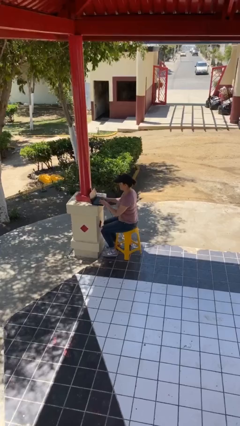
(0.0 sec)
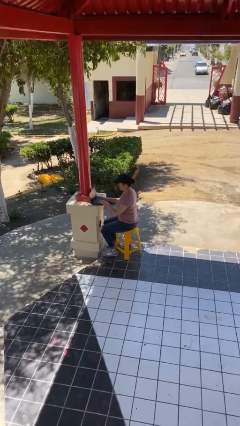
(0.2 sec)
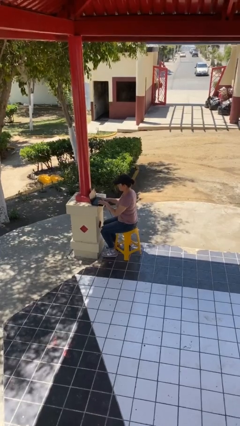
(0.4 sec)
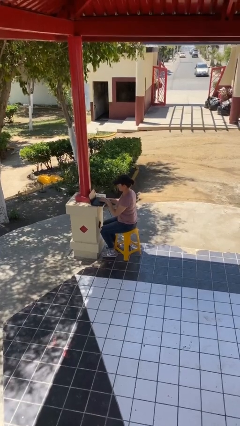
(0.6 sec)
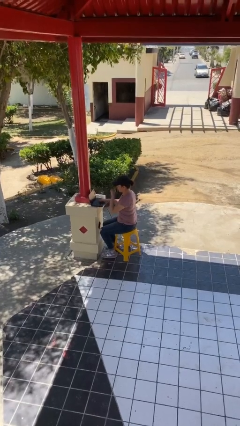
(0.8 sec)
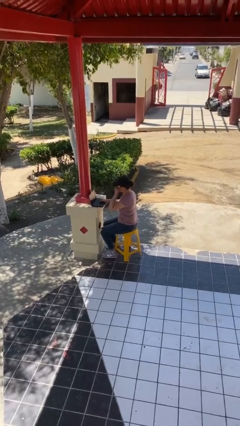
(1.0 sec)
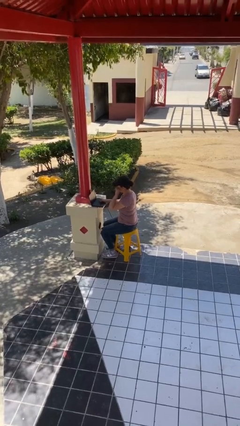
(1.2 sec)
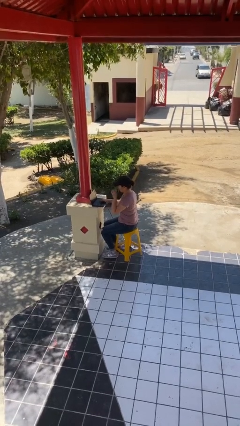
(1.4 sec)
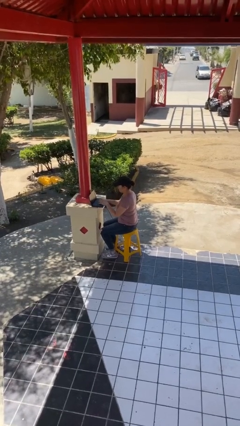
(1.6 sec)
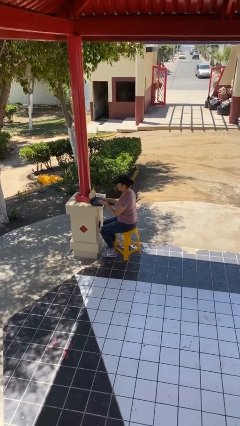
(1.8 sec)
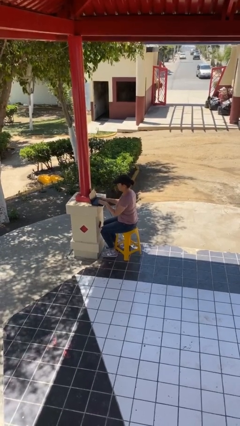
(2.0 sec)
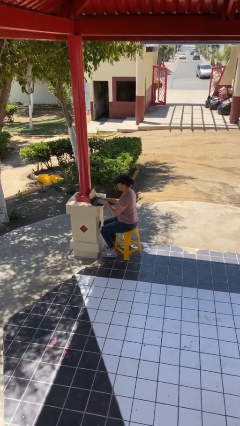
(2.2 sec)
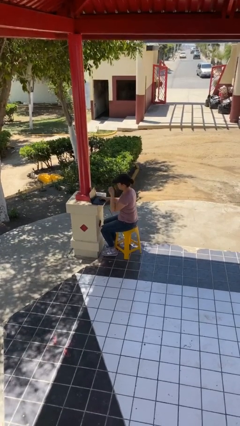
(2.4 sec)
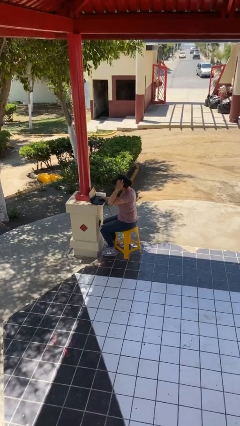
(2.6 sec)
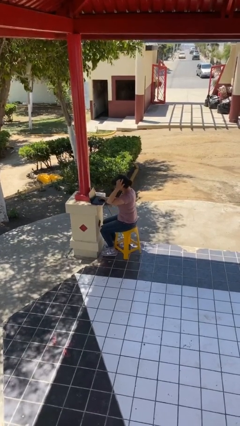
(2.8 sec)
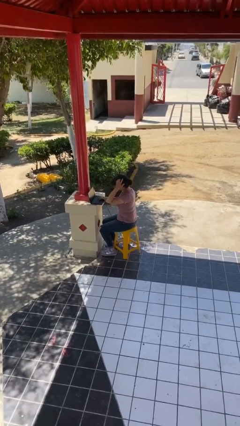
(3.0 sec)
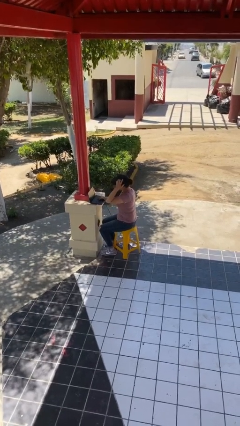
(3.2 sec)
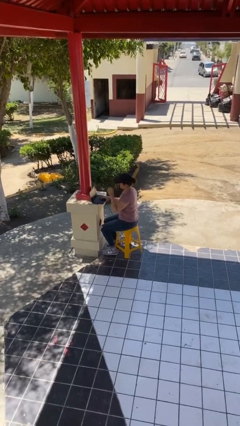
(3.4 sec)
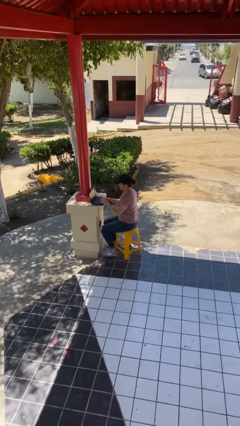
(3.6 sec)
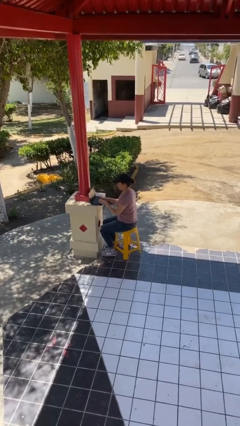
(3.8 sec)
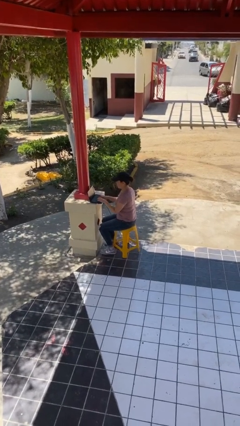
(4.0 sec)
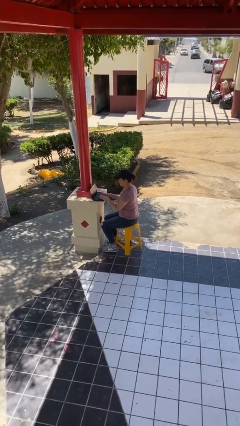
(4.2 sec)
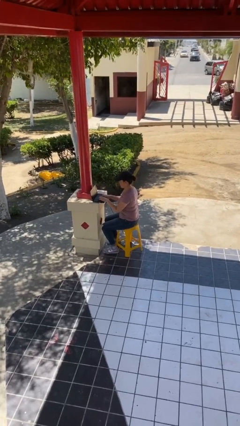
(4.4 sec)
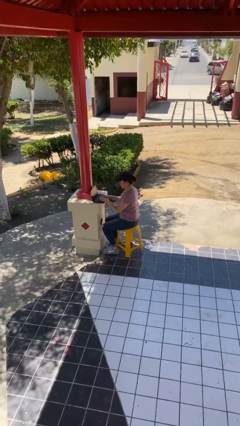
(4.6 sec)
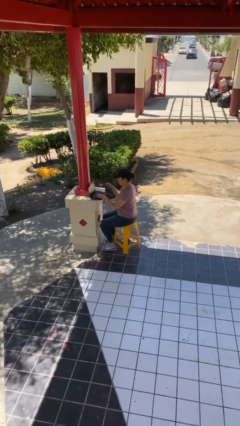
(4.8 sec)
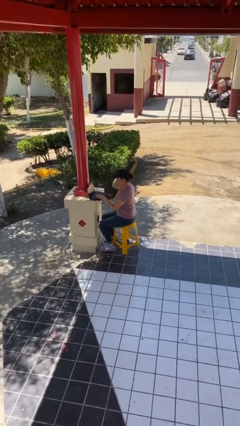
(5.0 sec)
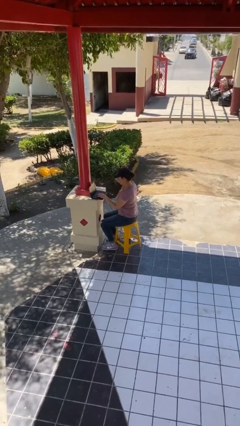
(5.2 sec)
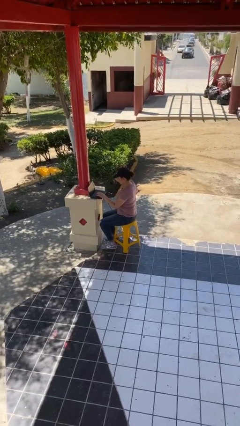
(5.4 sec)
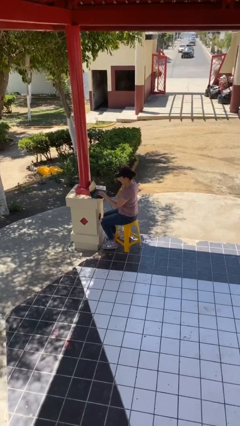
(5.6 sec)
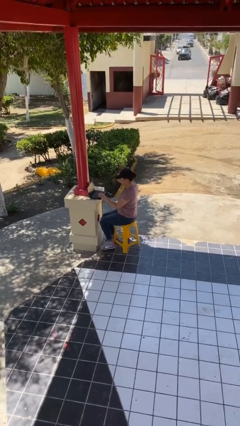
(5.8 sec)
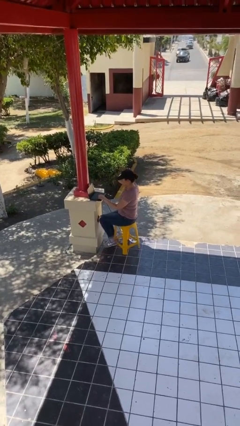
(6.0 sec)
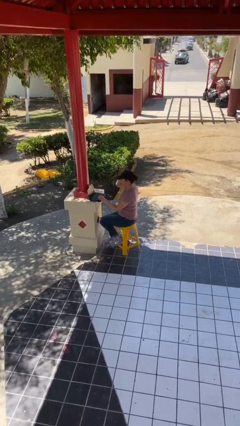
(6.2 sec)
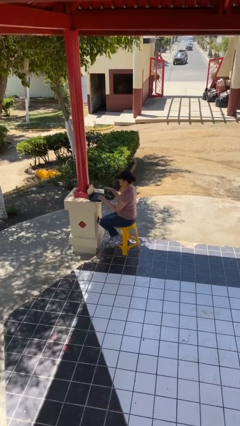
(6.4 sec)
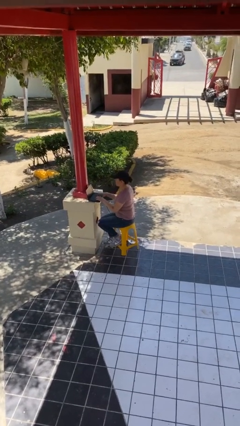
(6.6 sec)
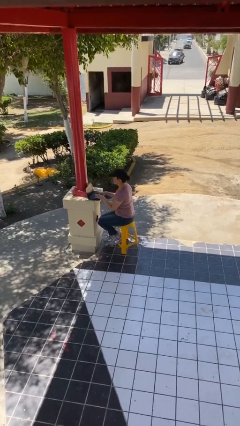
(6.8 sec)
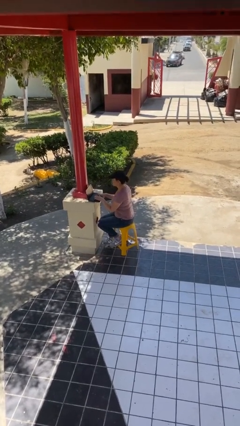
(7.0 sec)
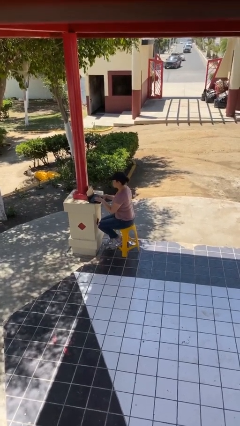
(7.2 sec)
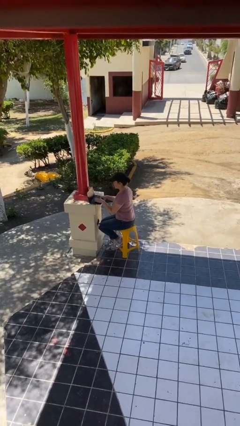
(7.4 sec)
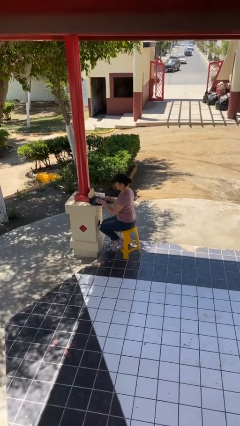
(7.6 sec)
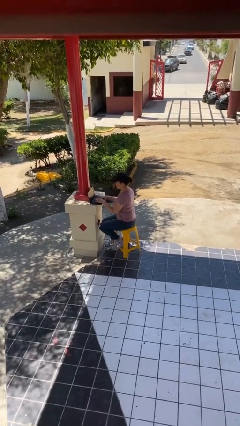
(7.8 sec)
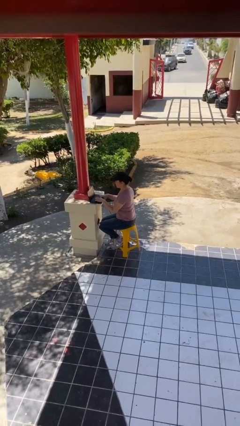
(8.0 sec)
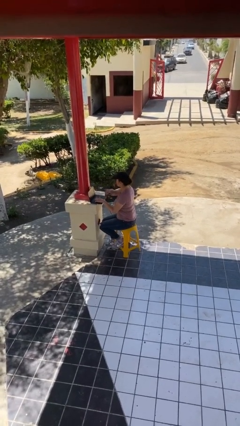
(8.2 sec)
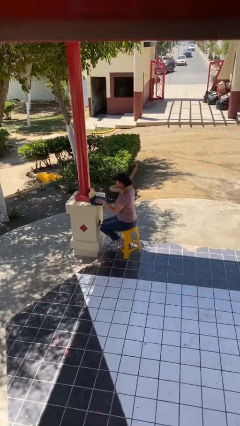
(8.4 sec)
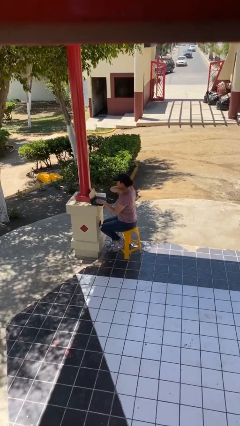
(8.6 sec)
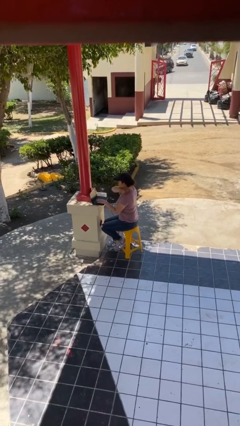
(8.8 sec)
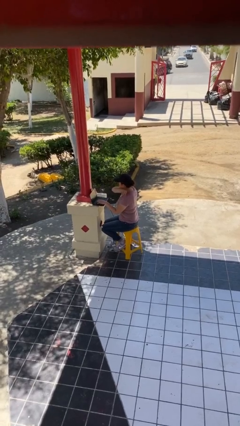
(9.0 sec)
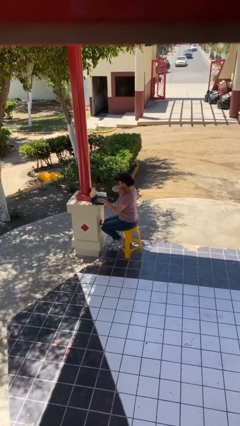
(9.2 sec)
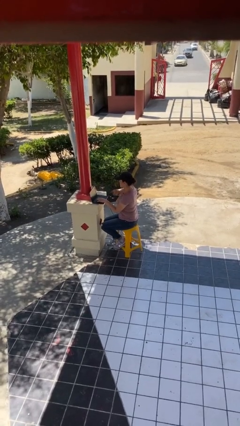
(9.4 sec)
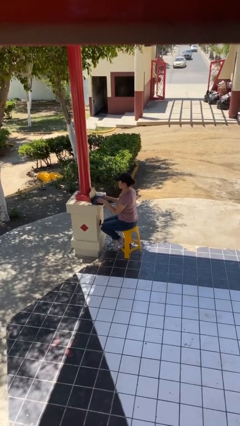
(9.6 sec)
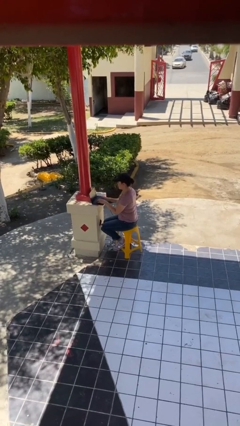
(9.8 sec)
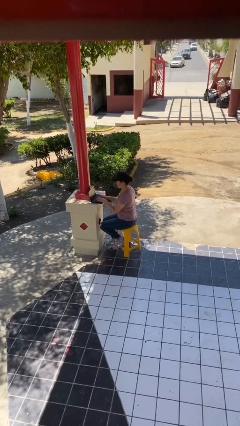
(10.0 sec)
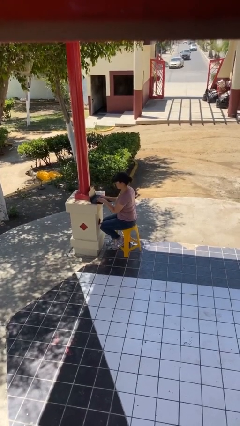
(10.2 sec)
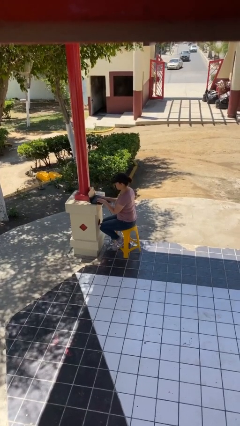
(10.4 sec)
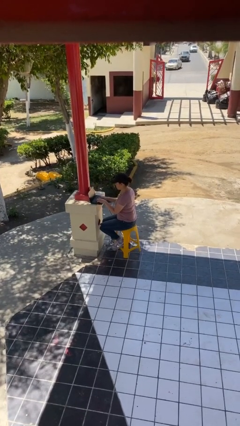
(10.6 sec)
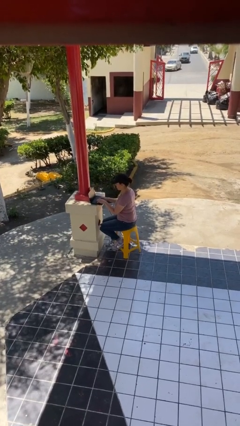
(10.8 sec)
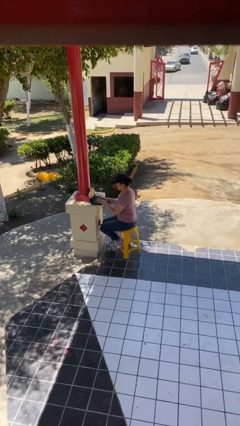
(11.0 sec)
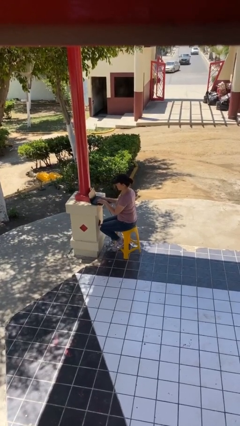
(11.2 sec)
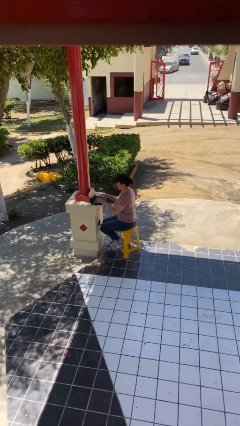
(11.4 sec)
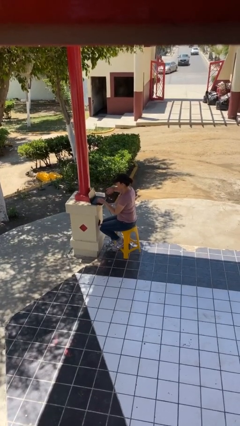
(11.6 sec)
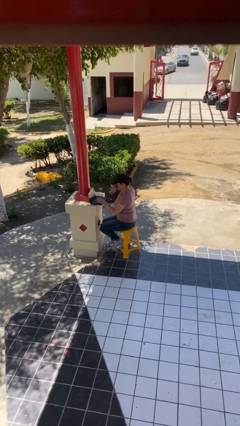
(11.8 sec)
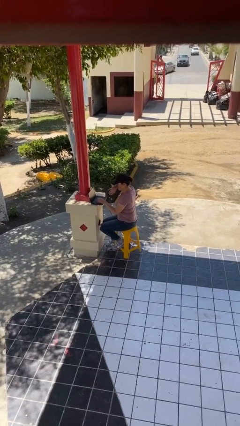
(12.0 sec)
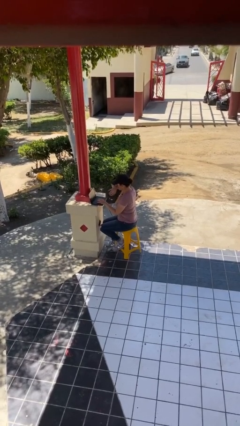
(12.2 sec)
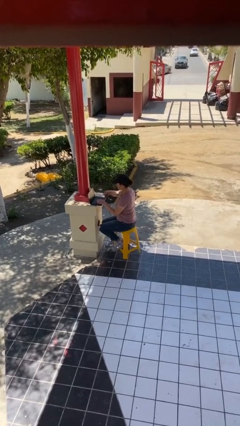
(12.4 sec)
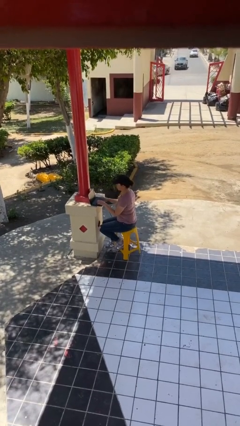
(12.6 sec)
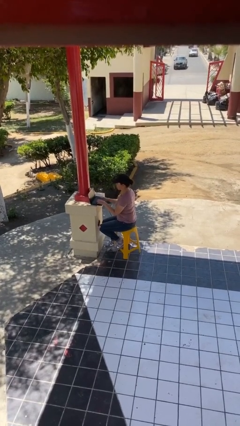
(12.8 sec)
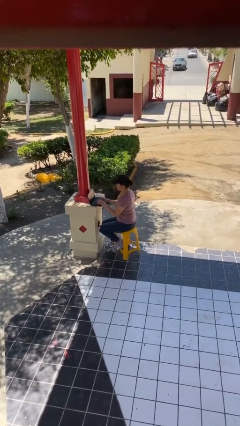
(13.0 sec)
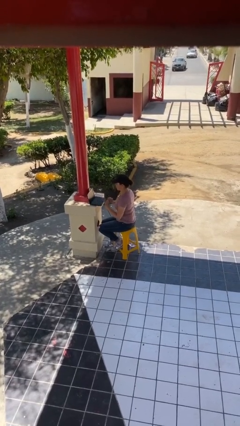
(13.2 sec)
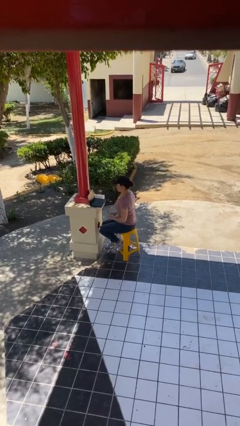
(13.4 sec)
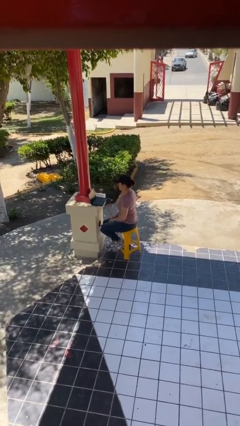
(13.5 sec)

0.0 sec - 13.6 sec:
person interacts with laptop

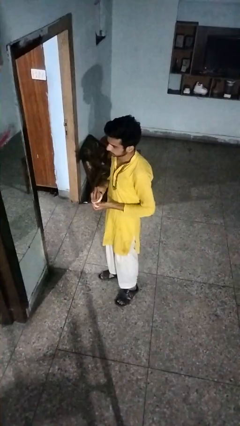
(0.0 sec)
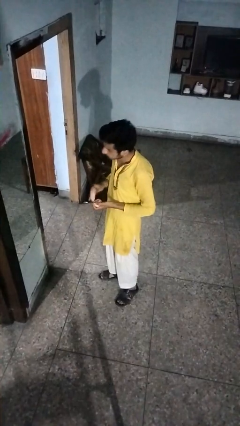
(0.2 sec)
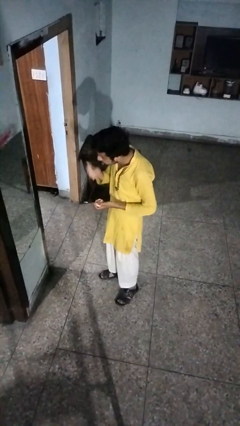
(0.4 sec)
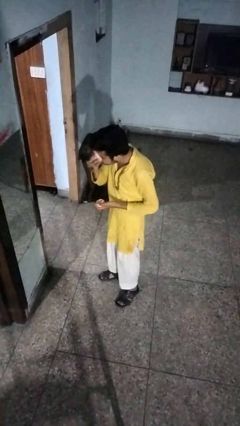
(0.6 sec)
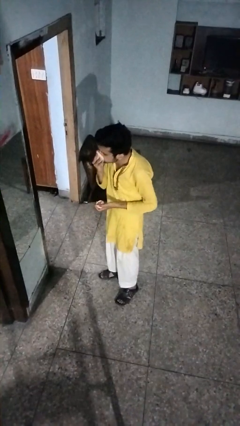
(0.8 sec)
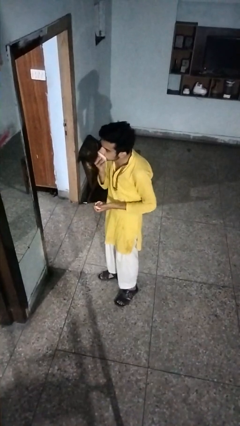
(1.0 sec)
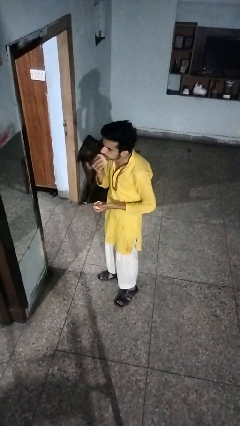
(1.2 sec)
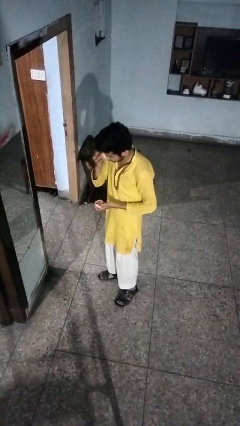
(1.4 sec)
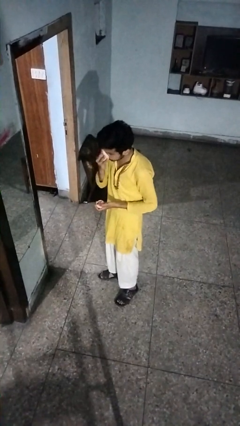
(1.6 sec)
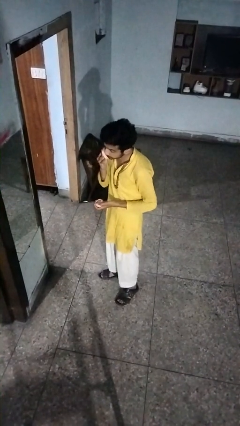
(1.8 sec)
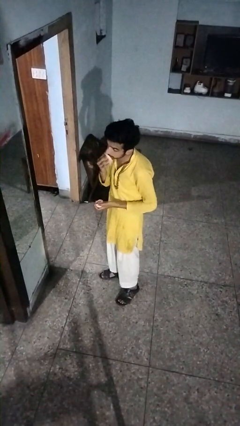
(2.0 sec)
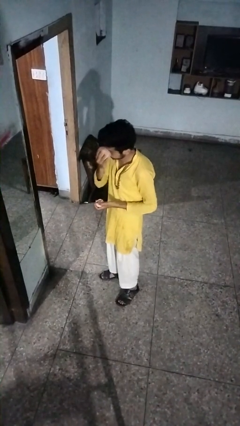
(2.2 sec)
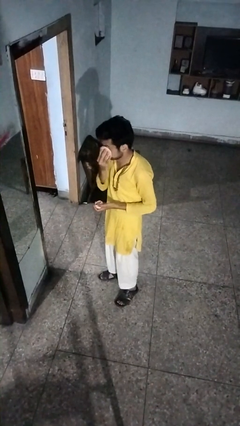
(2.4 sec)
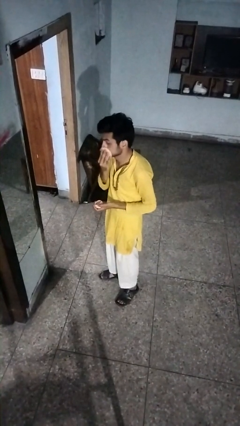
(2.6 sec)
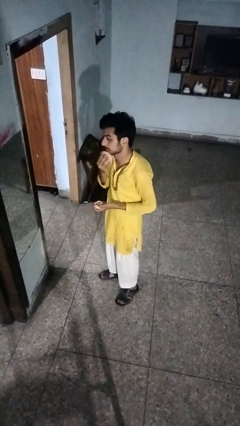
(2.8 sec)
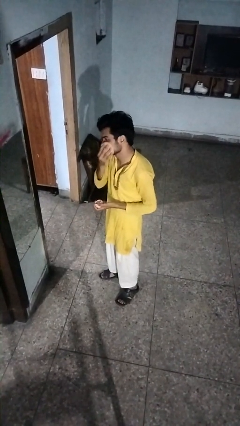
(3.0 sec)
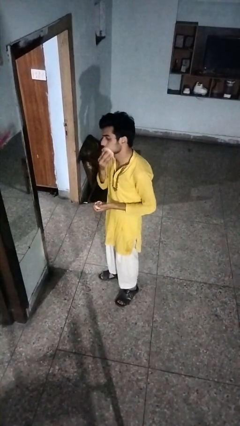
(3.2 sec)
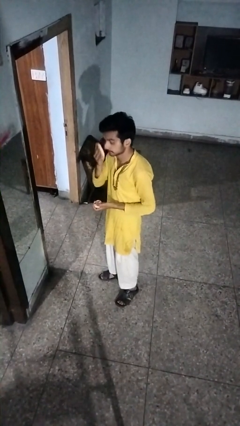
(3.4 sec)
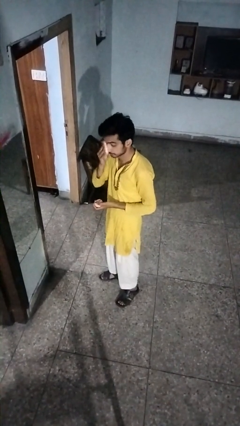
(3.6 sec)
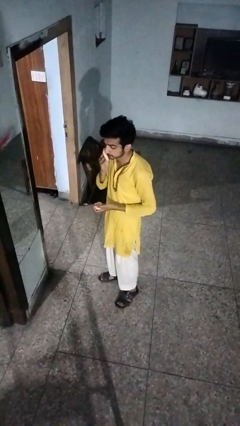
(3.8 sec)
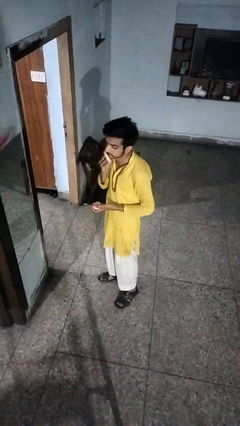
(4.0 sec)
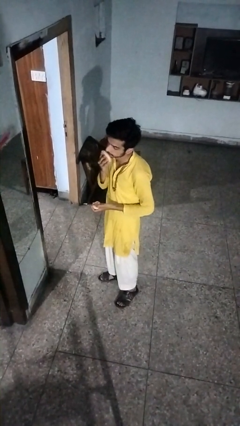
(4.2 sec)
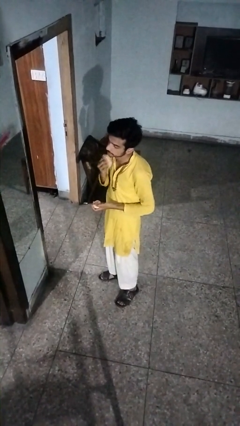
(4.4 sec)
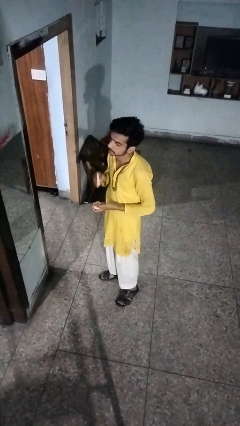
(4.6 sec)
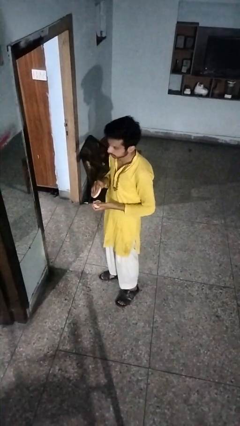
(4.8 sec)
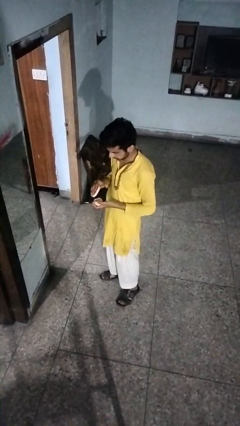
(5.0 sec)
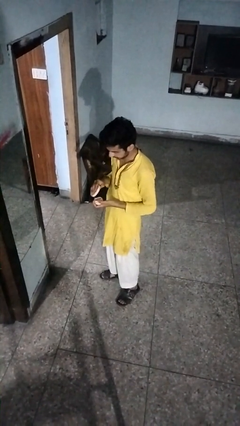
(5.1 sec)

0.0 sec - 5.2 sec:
person applies foundation makeup
